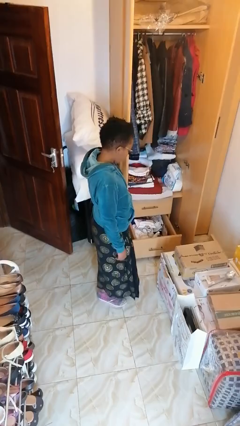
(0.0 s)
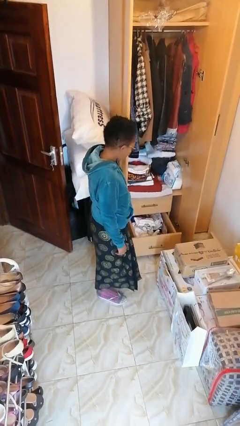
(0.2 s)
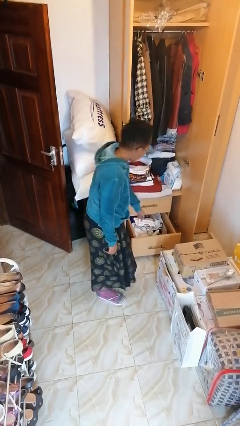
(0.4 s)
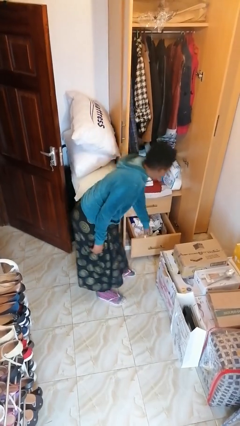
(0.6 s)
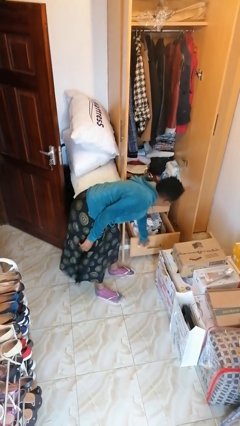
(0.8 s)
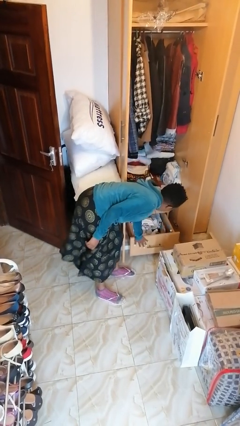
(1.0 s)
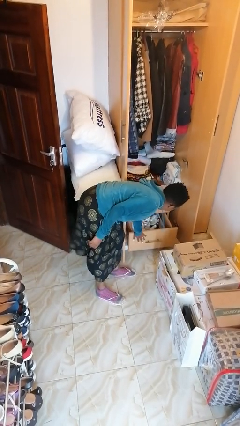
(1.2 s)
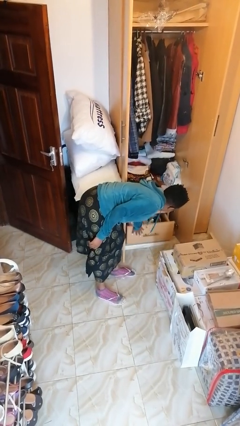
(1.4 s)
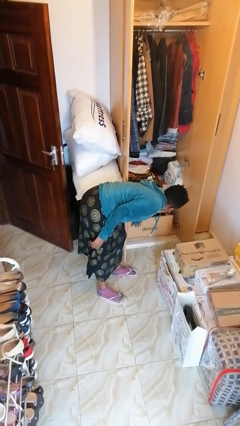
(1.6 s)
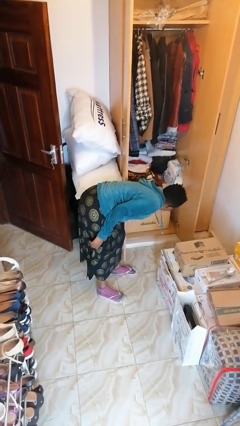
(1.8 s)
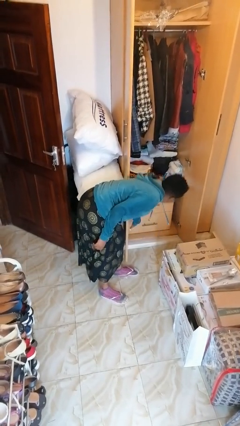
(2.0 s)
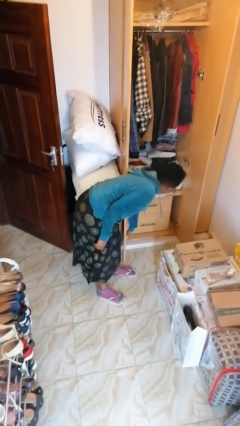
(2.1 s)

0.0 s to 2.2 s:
person closes dresser drawer

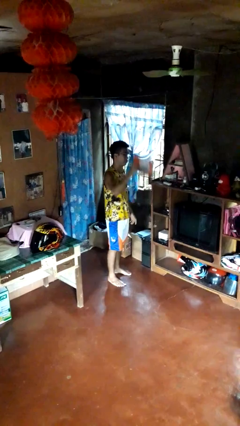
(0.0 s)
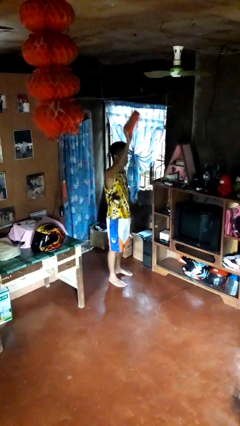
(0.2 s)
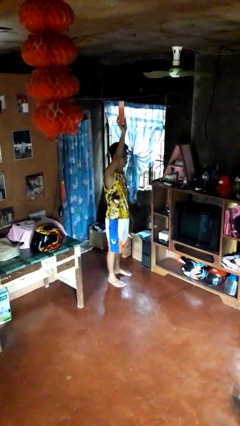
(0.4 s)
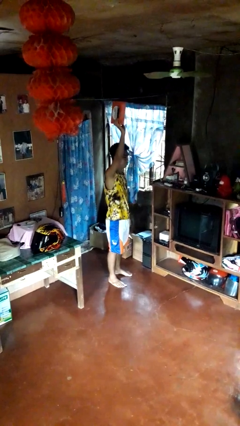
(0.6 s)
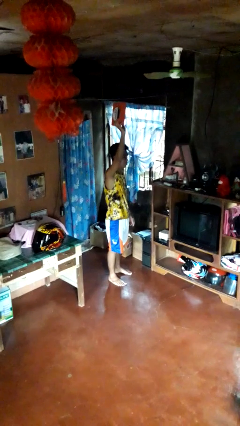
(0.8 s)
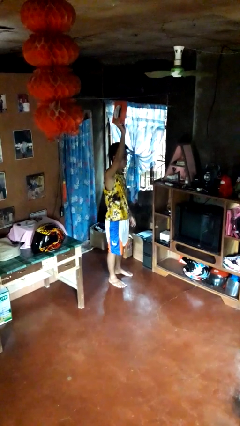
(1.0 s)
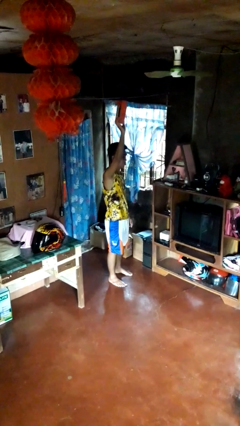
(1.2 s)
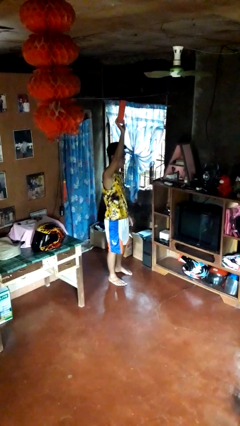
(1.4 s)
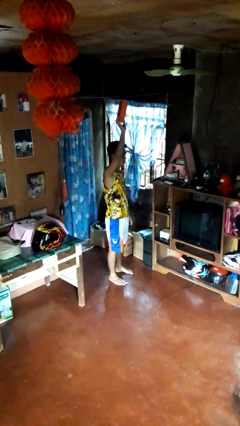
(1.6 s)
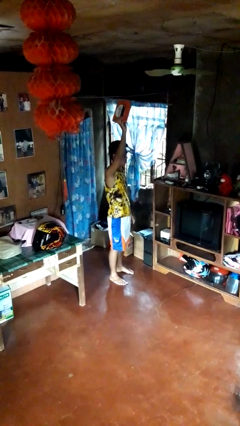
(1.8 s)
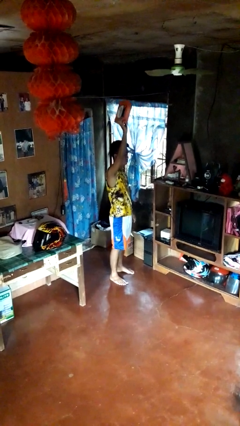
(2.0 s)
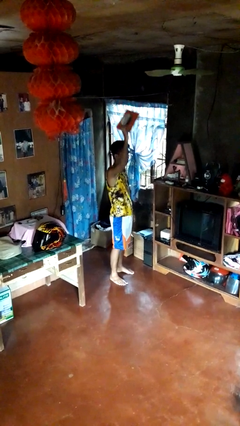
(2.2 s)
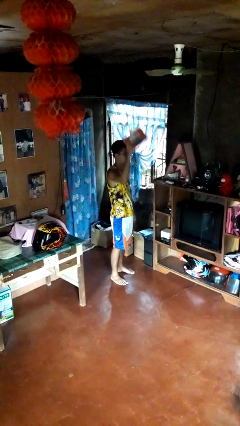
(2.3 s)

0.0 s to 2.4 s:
person holds object above head

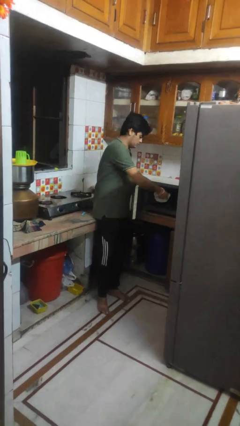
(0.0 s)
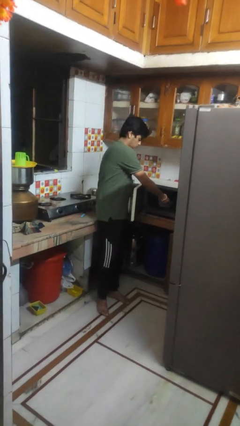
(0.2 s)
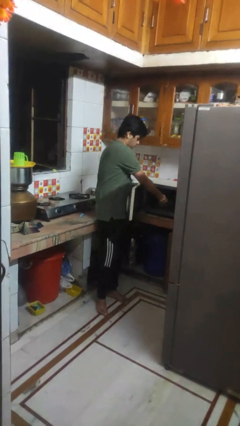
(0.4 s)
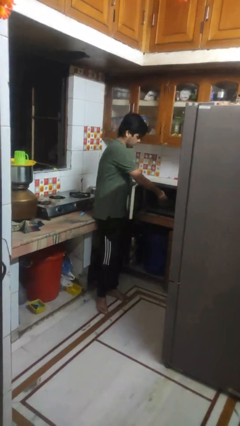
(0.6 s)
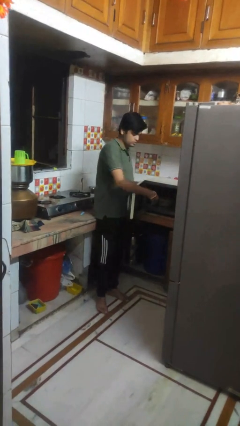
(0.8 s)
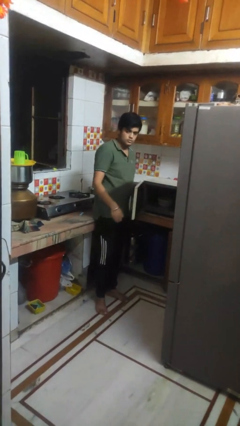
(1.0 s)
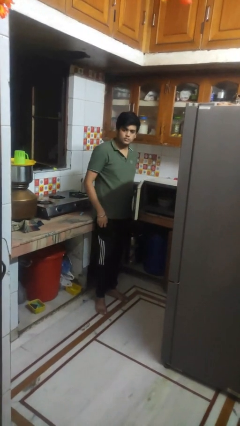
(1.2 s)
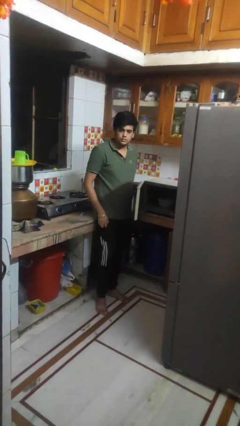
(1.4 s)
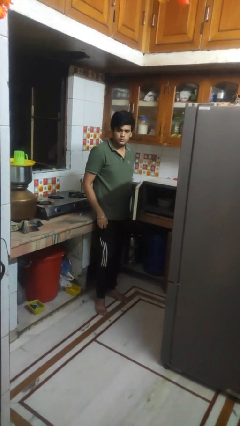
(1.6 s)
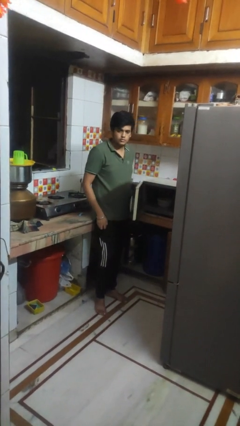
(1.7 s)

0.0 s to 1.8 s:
person puts object into microwave

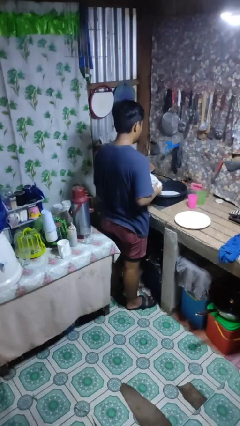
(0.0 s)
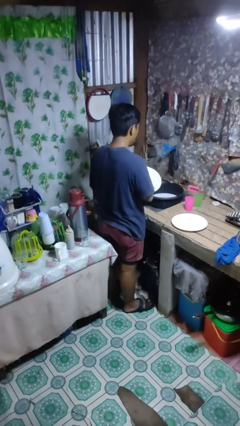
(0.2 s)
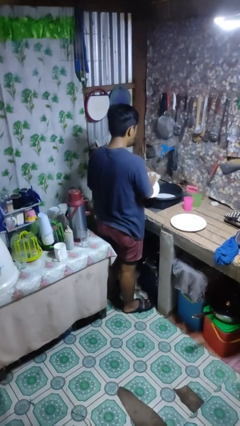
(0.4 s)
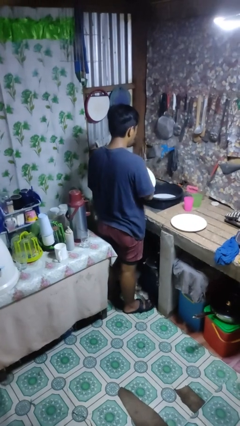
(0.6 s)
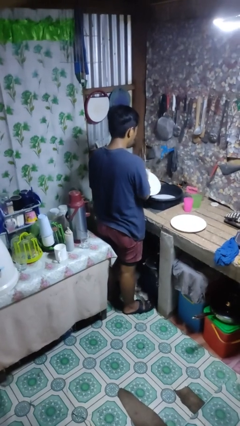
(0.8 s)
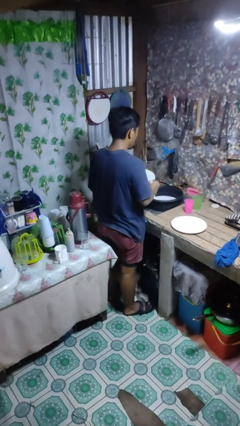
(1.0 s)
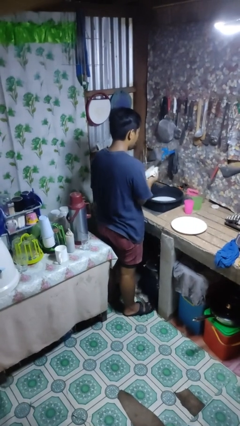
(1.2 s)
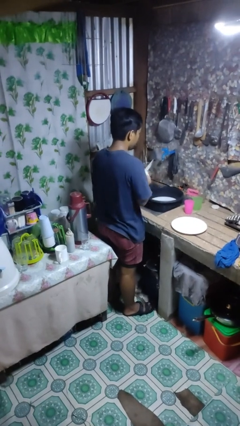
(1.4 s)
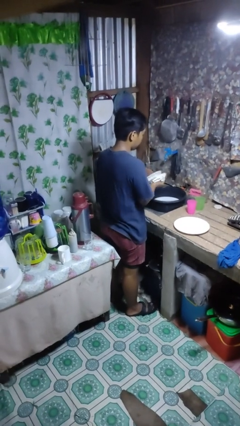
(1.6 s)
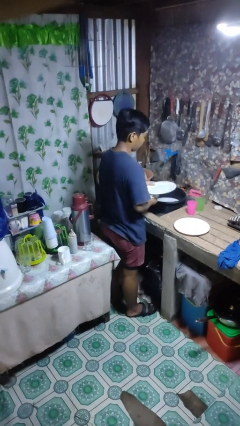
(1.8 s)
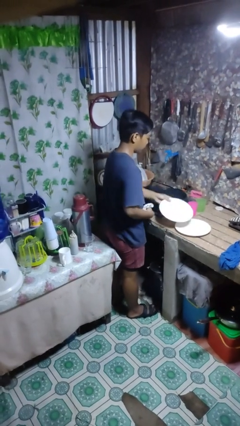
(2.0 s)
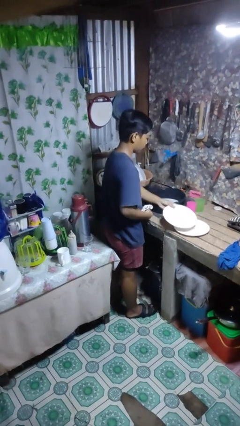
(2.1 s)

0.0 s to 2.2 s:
person dries dish

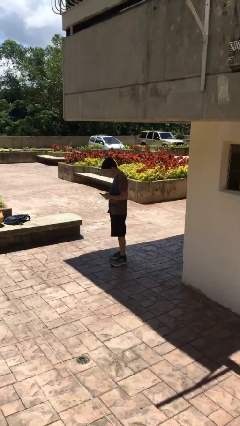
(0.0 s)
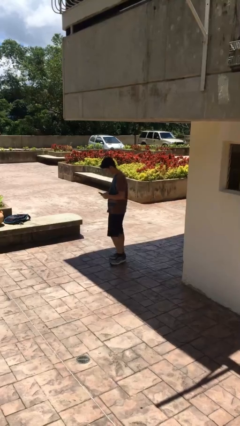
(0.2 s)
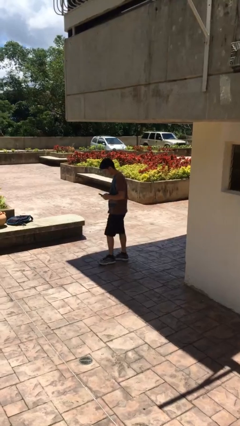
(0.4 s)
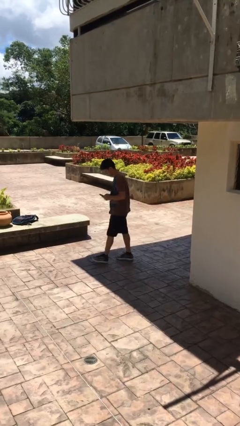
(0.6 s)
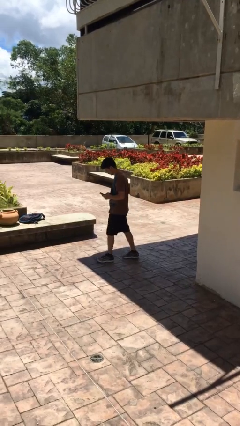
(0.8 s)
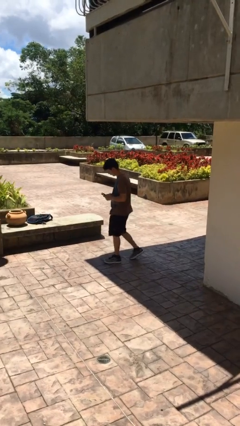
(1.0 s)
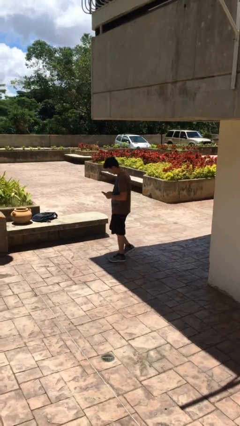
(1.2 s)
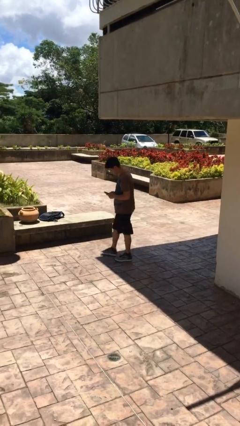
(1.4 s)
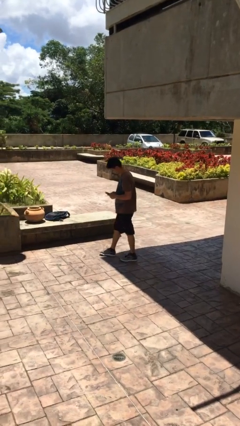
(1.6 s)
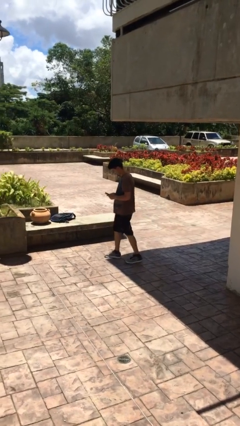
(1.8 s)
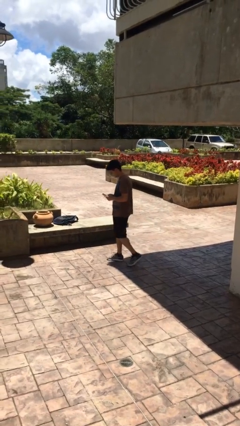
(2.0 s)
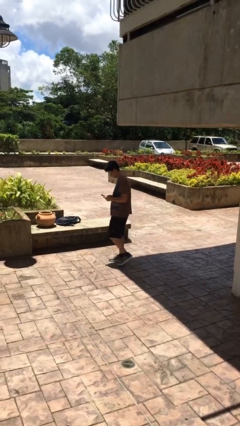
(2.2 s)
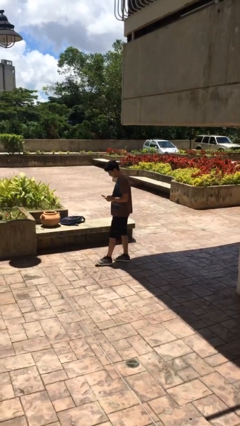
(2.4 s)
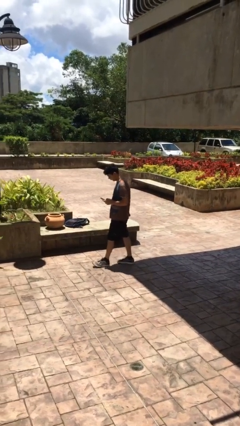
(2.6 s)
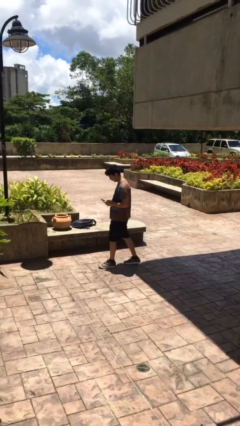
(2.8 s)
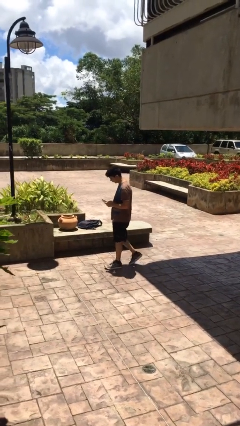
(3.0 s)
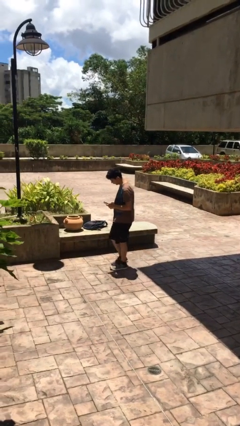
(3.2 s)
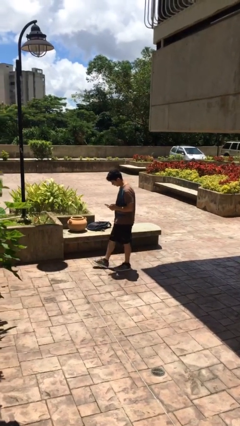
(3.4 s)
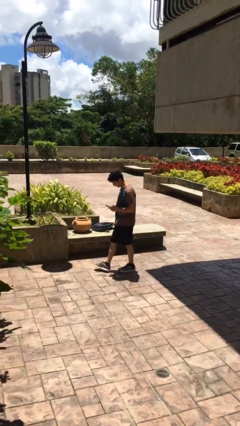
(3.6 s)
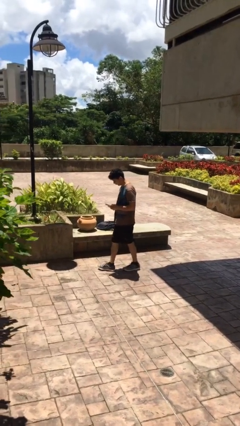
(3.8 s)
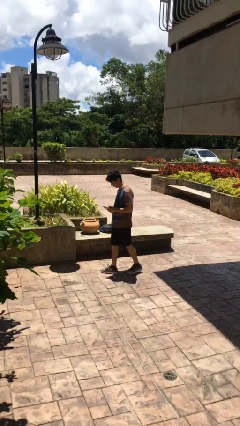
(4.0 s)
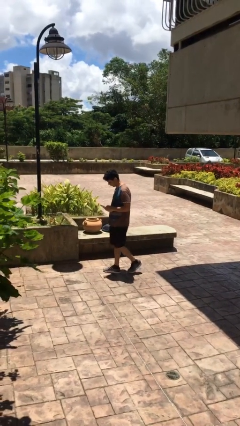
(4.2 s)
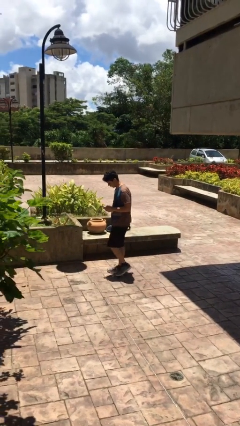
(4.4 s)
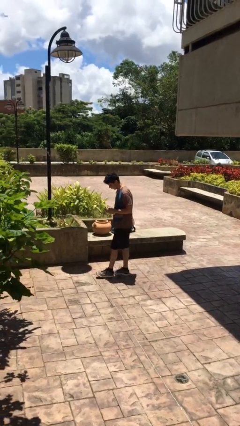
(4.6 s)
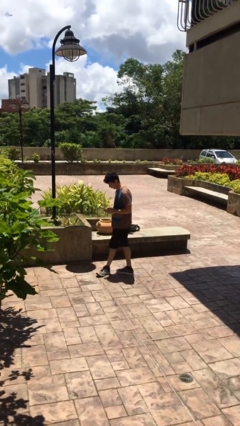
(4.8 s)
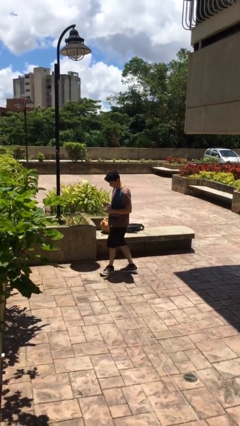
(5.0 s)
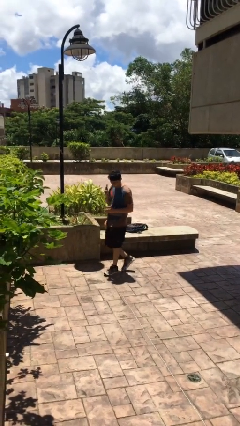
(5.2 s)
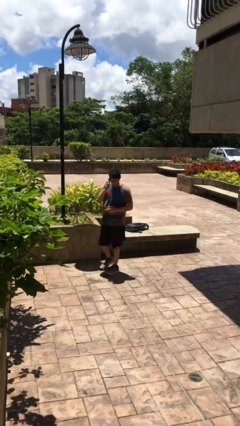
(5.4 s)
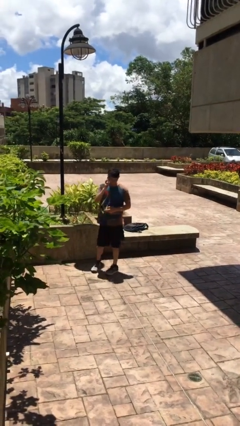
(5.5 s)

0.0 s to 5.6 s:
person texts on phone

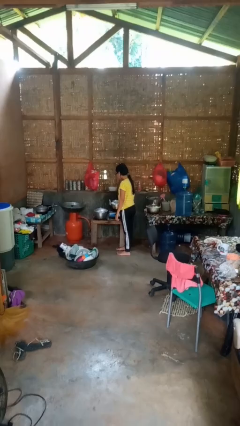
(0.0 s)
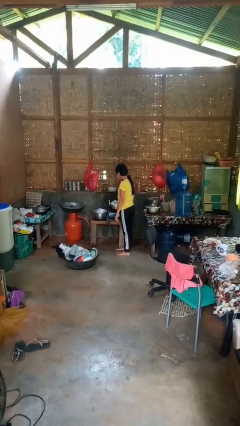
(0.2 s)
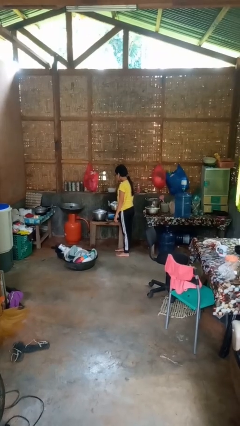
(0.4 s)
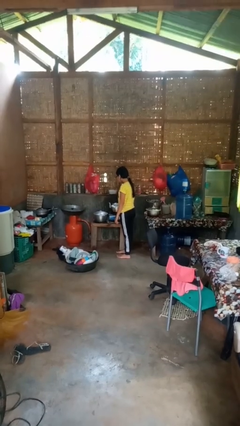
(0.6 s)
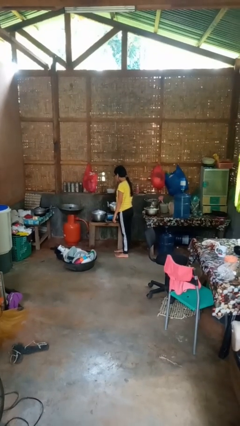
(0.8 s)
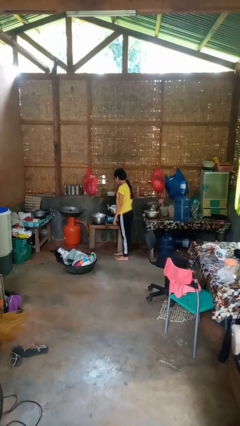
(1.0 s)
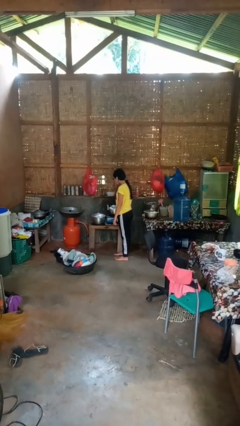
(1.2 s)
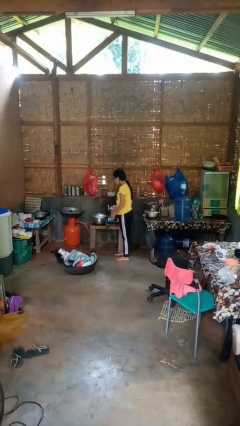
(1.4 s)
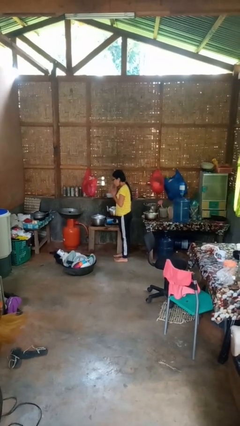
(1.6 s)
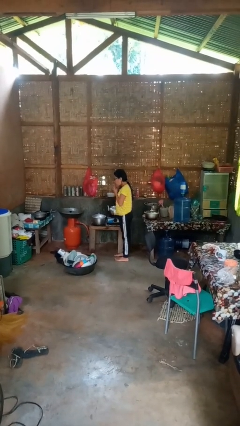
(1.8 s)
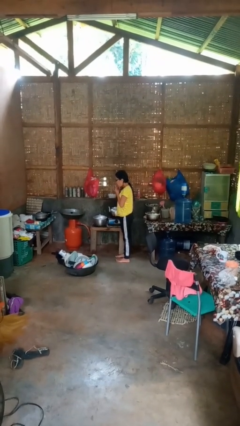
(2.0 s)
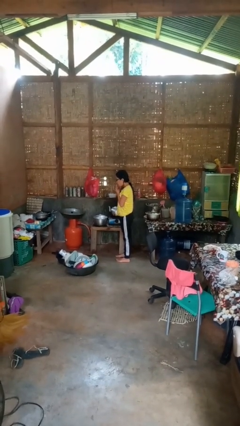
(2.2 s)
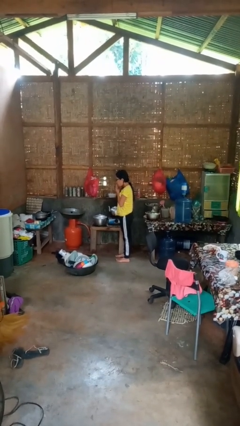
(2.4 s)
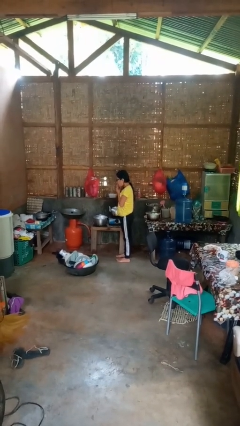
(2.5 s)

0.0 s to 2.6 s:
person burns hand

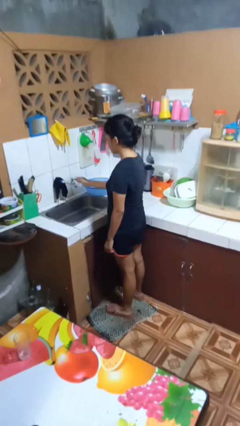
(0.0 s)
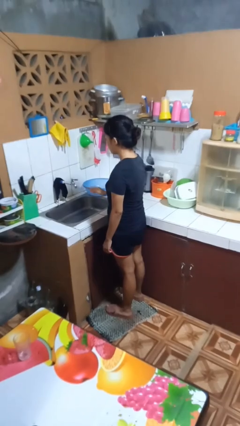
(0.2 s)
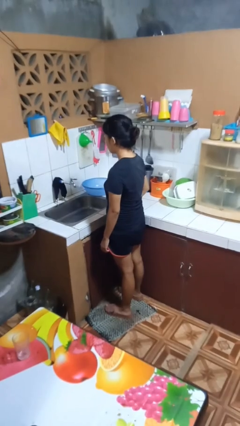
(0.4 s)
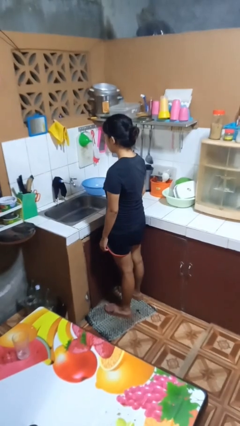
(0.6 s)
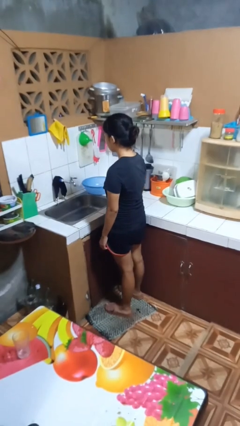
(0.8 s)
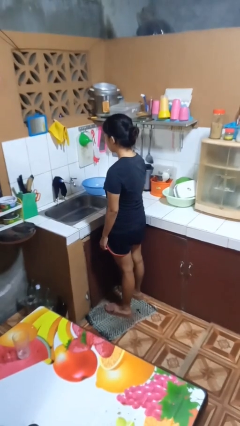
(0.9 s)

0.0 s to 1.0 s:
person turns off faucet
